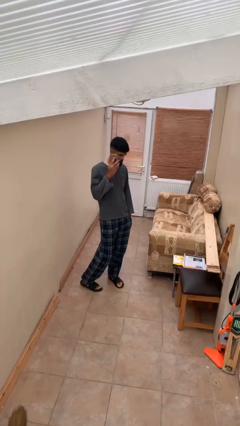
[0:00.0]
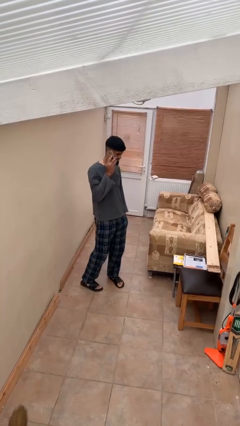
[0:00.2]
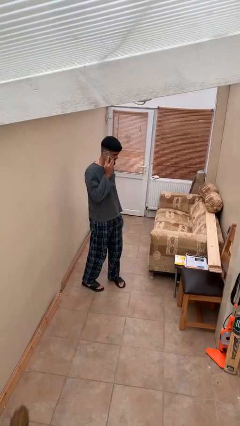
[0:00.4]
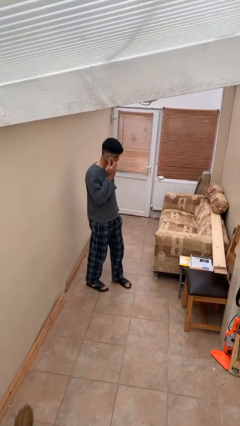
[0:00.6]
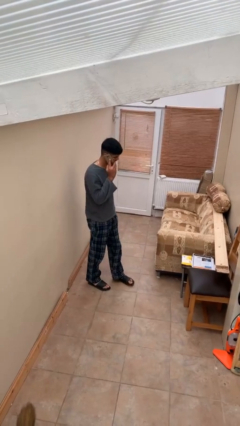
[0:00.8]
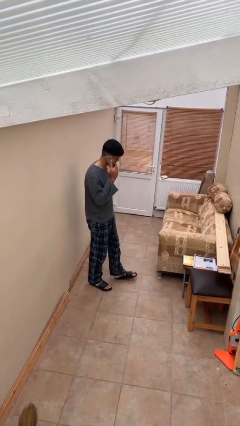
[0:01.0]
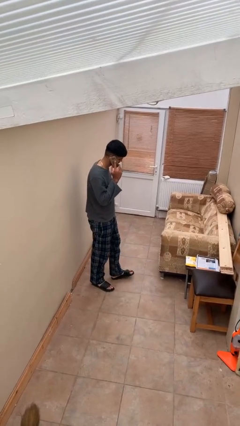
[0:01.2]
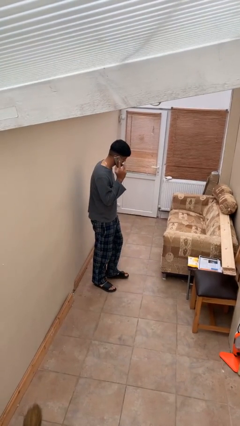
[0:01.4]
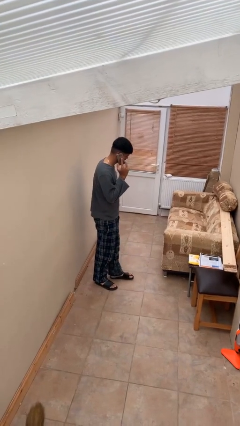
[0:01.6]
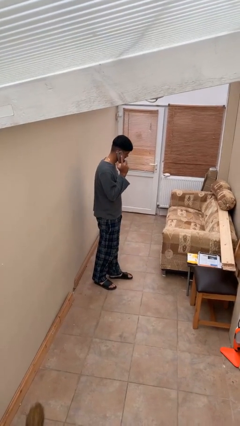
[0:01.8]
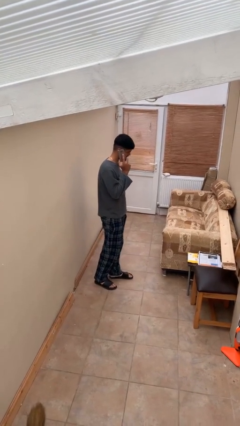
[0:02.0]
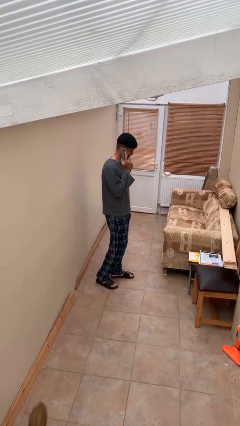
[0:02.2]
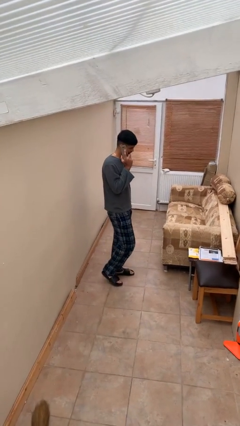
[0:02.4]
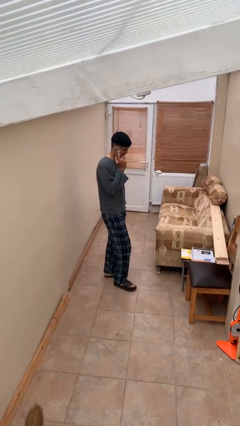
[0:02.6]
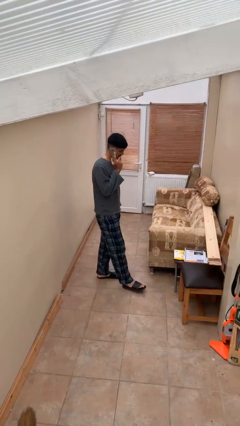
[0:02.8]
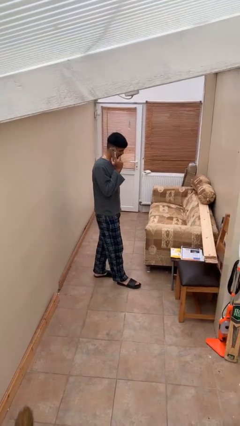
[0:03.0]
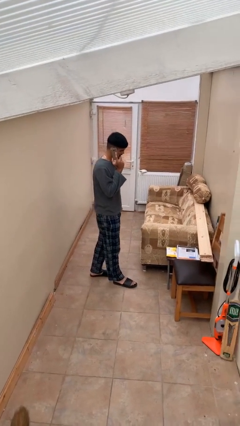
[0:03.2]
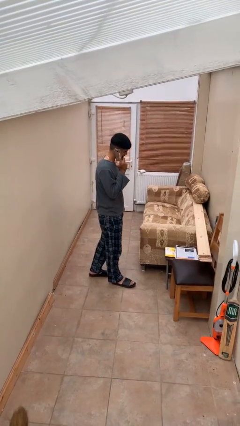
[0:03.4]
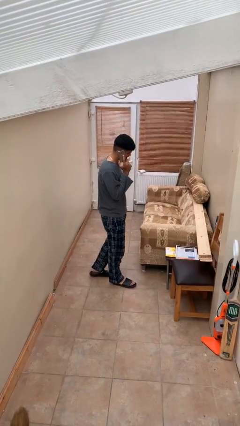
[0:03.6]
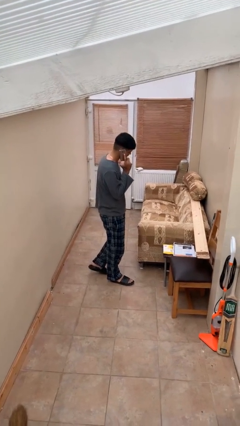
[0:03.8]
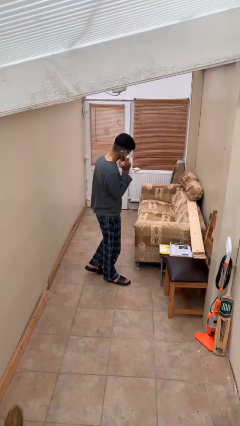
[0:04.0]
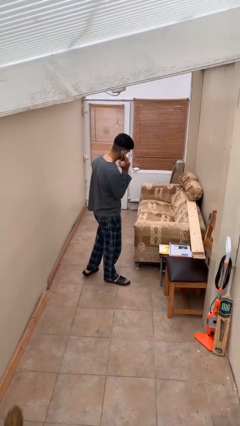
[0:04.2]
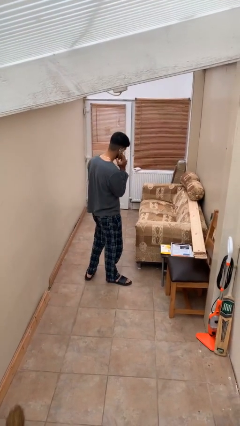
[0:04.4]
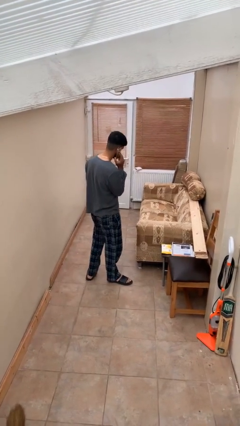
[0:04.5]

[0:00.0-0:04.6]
person talks on phone

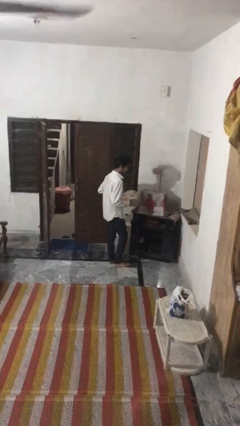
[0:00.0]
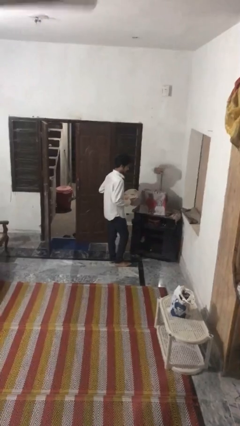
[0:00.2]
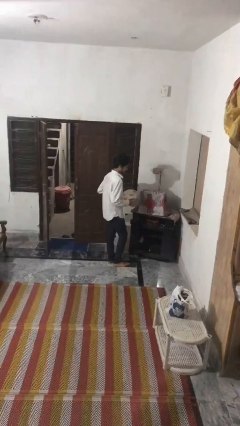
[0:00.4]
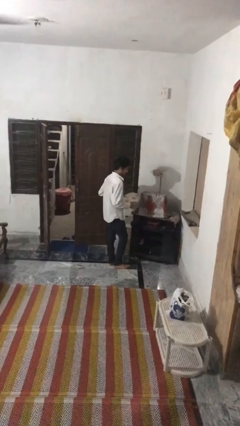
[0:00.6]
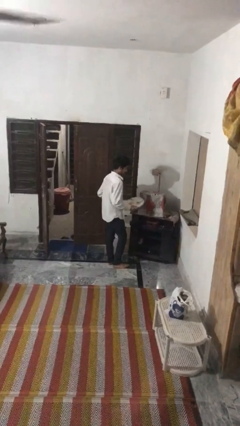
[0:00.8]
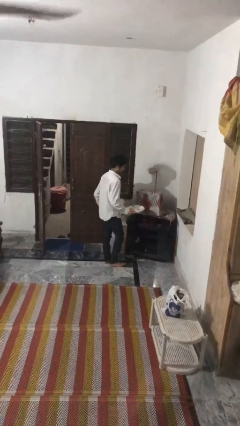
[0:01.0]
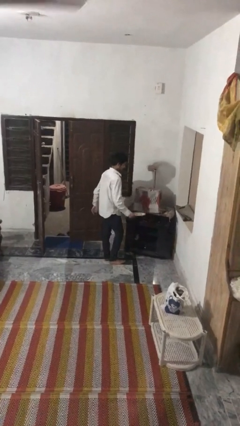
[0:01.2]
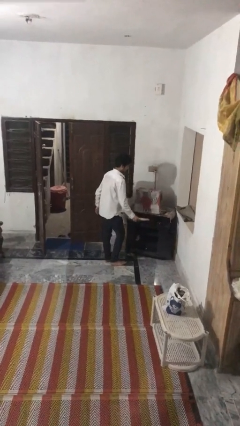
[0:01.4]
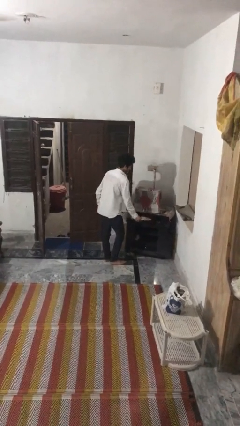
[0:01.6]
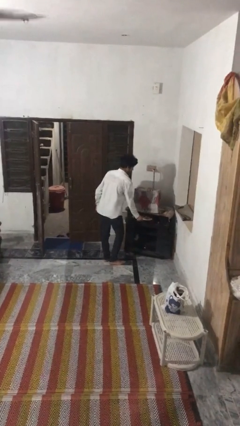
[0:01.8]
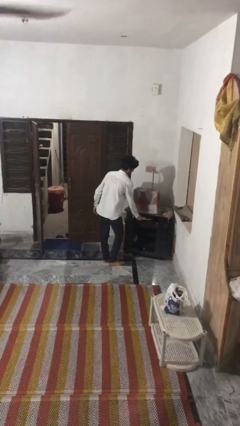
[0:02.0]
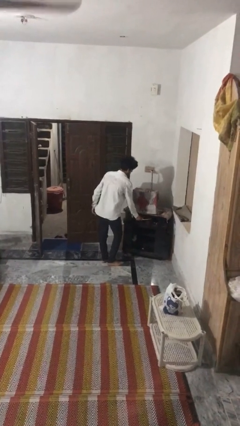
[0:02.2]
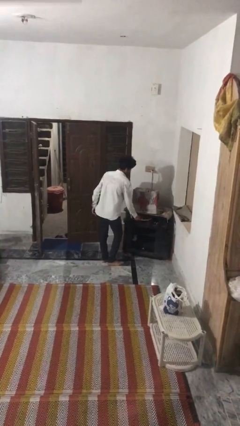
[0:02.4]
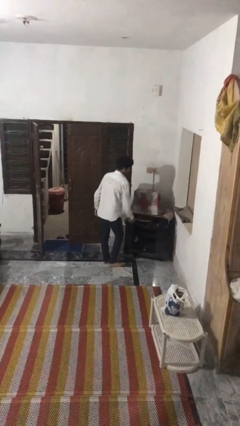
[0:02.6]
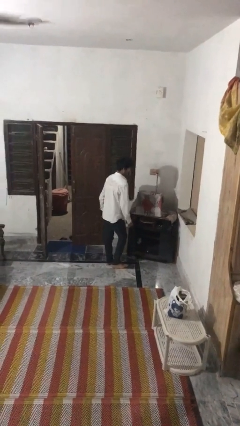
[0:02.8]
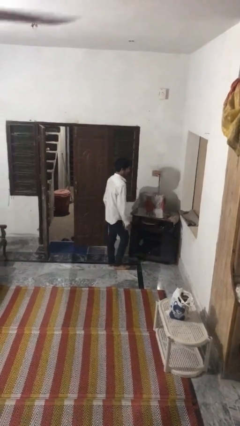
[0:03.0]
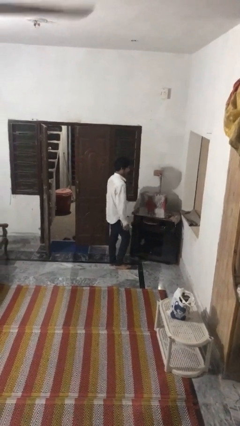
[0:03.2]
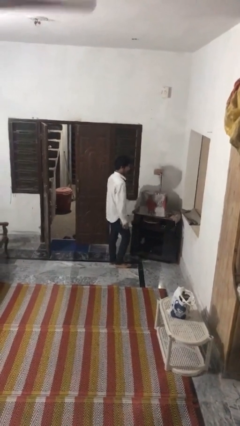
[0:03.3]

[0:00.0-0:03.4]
person puts down object into cabinet

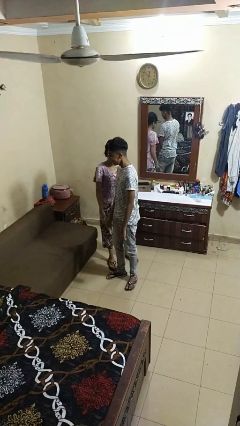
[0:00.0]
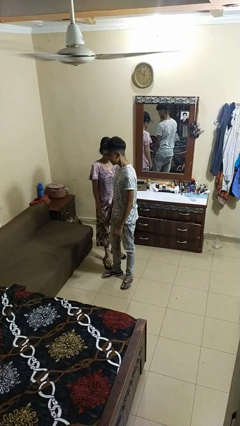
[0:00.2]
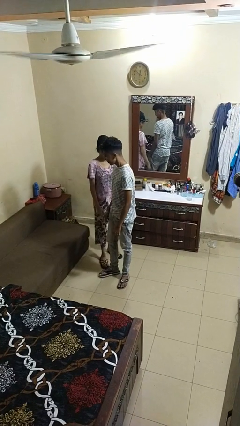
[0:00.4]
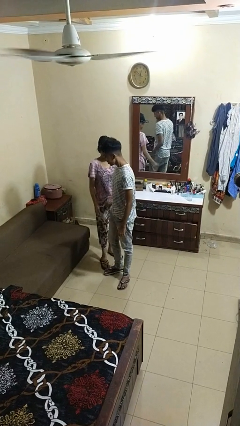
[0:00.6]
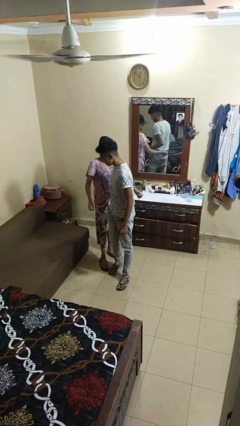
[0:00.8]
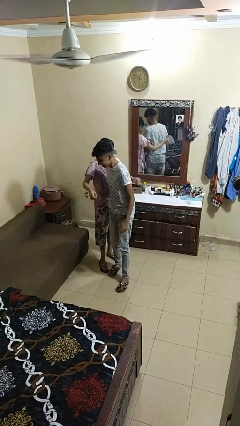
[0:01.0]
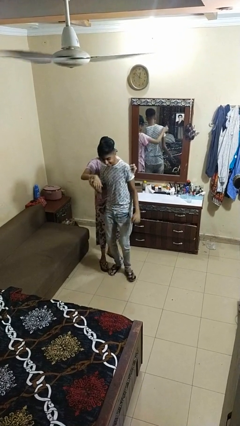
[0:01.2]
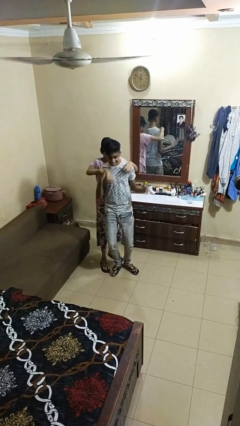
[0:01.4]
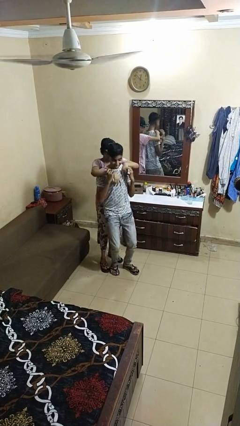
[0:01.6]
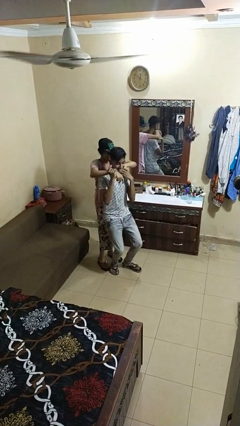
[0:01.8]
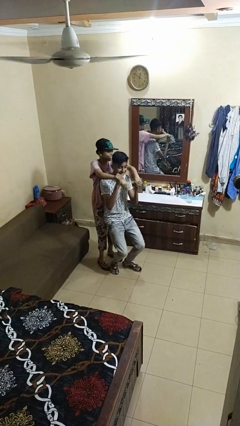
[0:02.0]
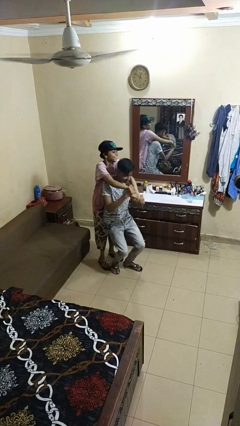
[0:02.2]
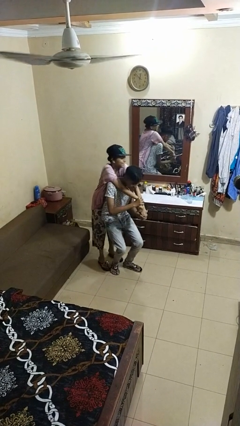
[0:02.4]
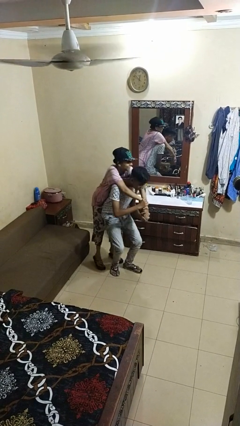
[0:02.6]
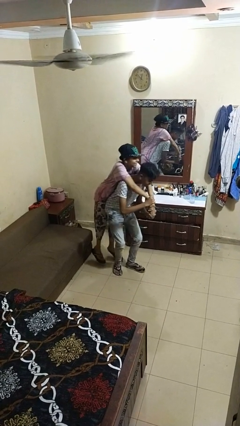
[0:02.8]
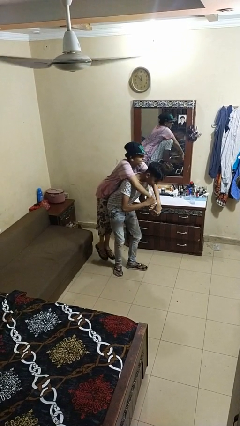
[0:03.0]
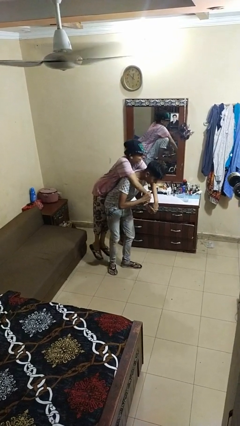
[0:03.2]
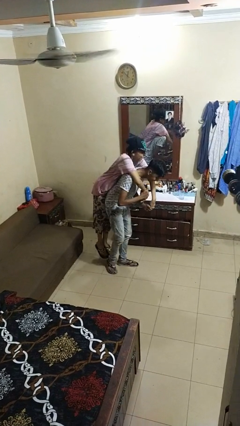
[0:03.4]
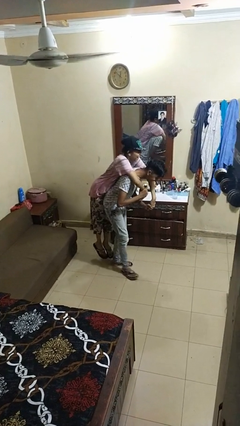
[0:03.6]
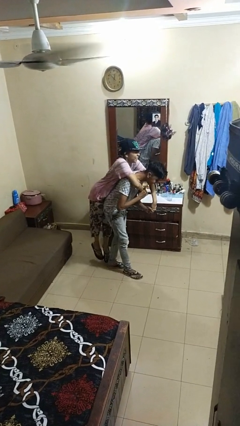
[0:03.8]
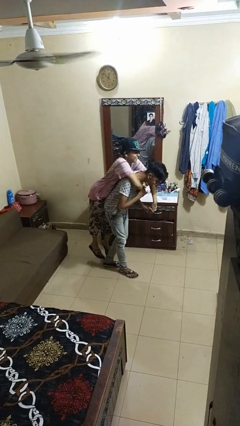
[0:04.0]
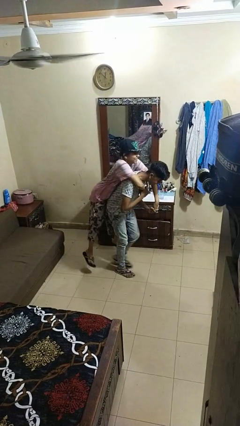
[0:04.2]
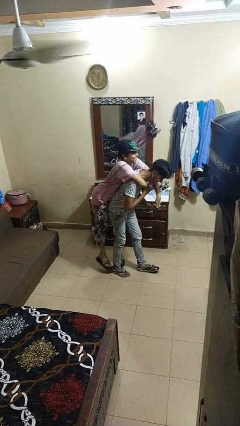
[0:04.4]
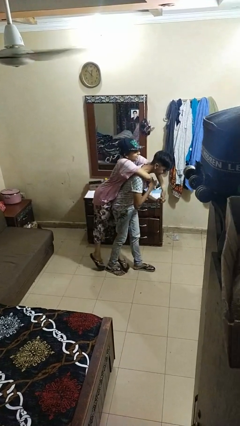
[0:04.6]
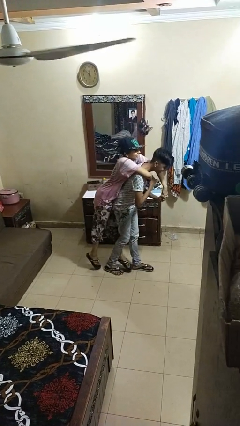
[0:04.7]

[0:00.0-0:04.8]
person carries person on back

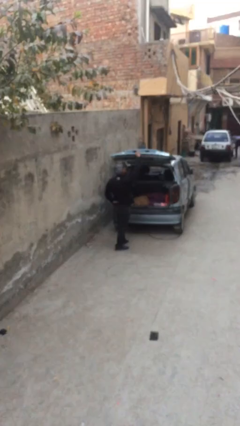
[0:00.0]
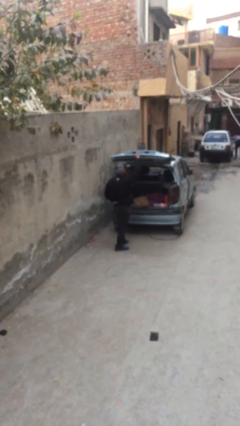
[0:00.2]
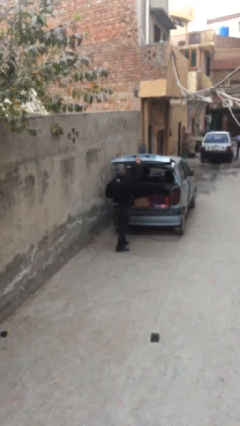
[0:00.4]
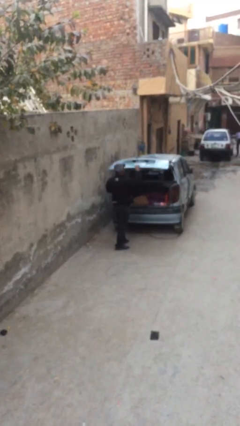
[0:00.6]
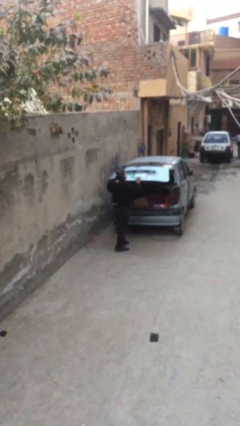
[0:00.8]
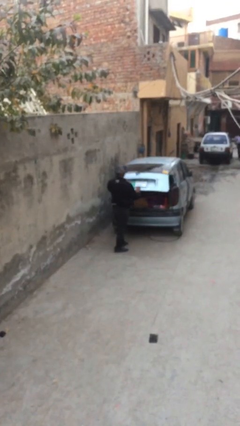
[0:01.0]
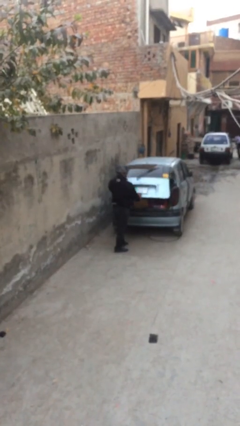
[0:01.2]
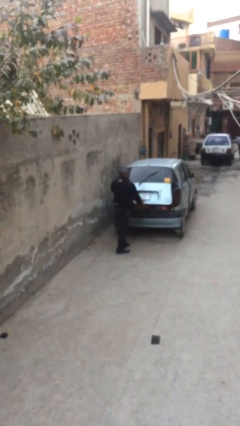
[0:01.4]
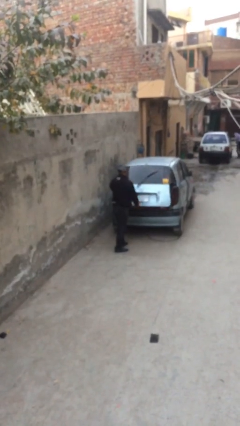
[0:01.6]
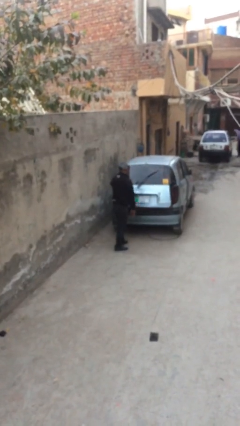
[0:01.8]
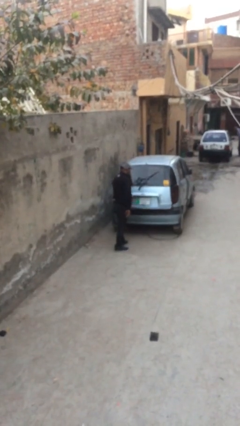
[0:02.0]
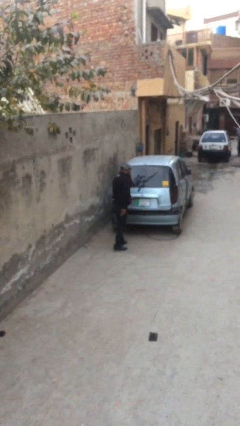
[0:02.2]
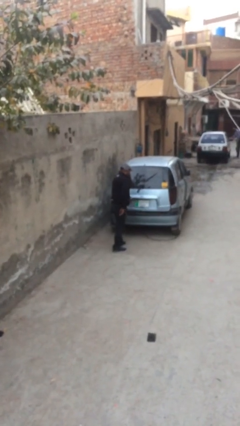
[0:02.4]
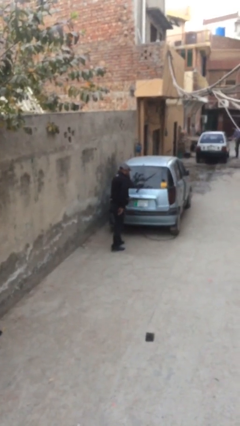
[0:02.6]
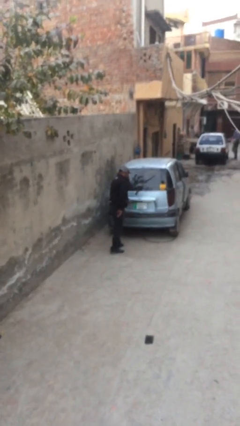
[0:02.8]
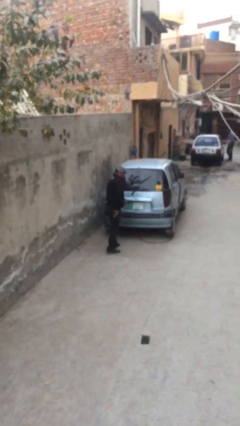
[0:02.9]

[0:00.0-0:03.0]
person closes car trunk

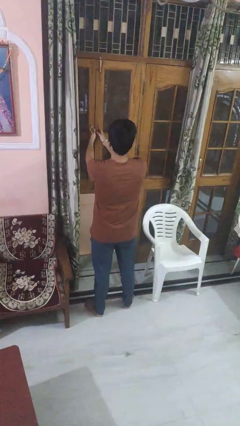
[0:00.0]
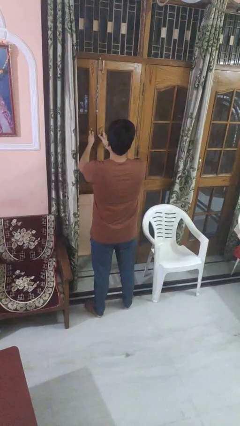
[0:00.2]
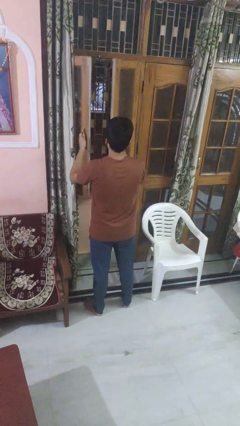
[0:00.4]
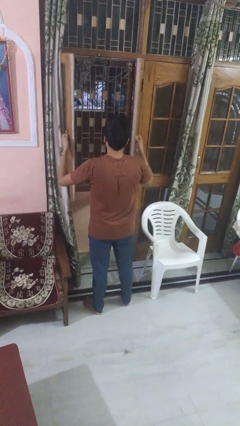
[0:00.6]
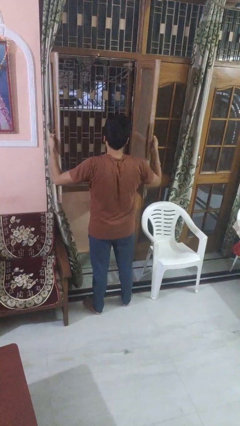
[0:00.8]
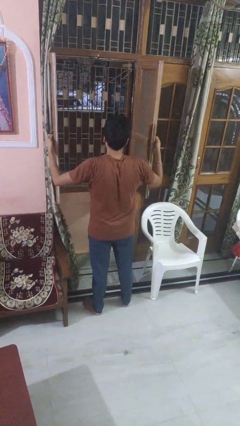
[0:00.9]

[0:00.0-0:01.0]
person opens home window

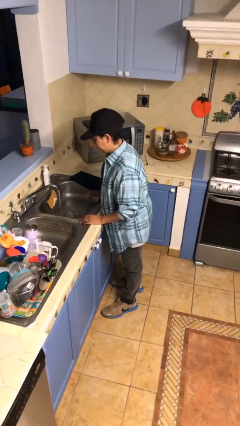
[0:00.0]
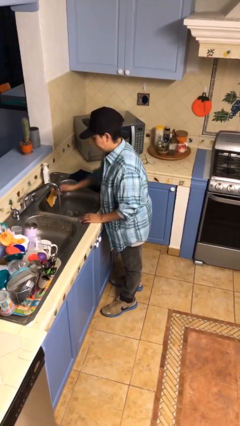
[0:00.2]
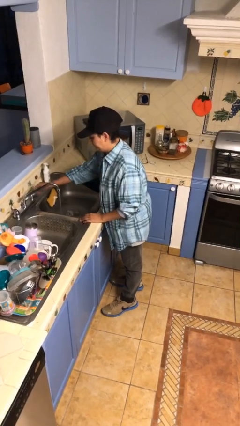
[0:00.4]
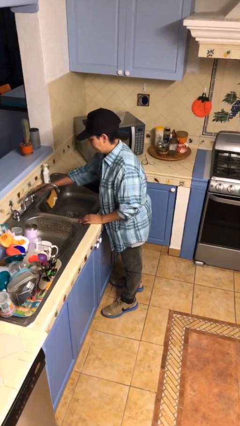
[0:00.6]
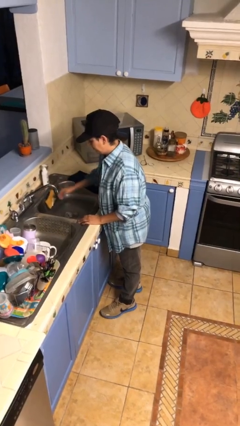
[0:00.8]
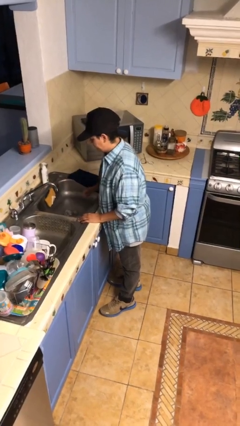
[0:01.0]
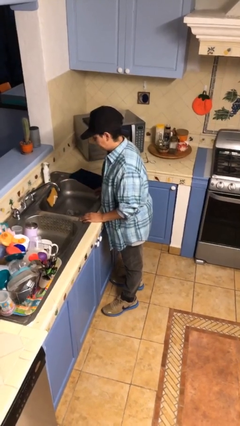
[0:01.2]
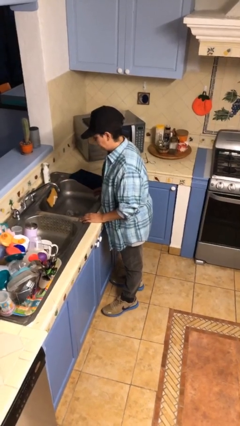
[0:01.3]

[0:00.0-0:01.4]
person turns off faucet
